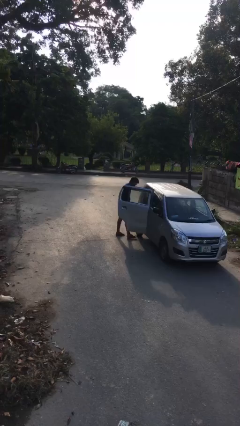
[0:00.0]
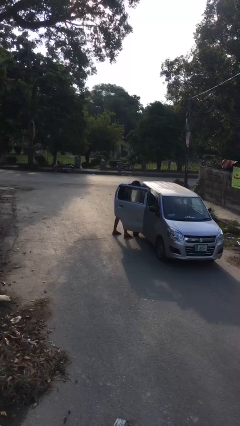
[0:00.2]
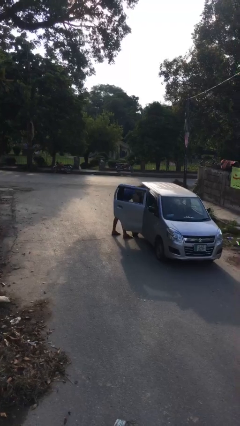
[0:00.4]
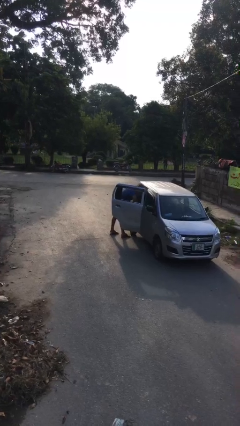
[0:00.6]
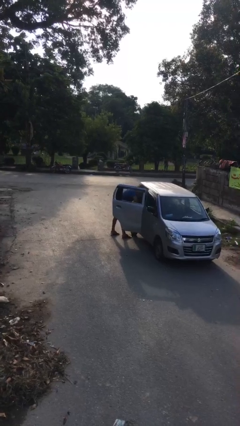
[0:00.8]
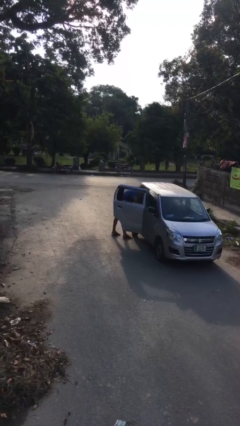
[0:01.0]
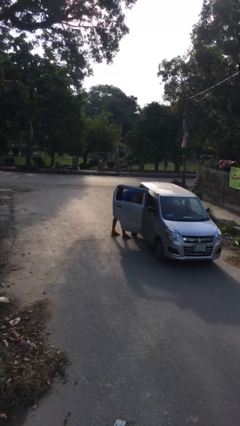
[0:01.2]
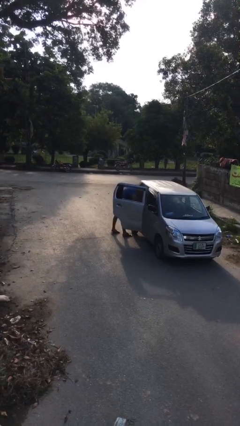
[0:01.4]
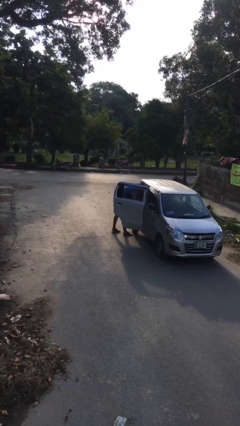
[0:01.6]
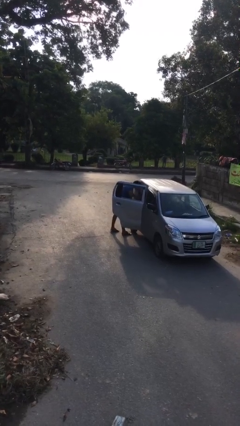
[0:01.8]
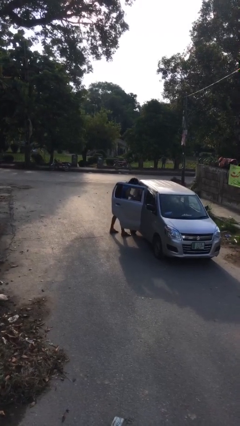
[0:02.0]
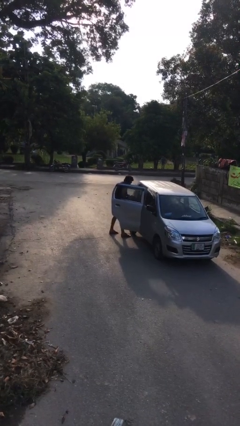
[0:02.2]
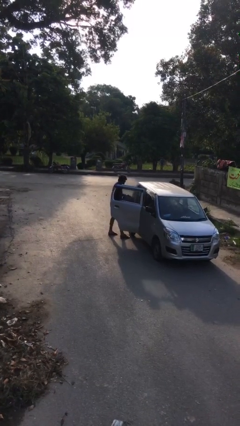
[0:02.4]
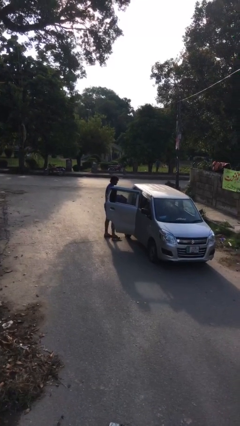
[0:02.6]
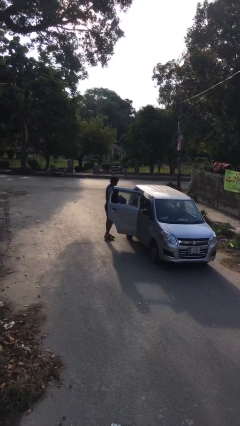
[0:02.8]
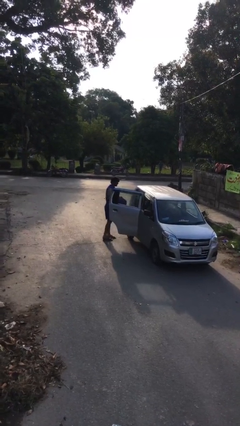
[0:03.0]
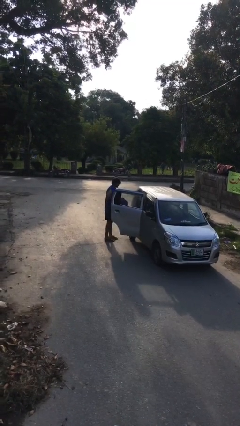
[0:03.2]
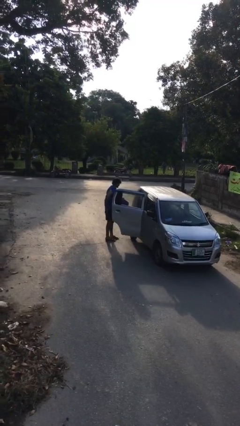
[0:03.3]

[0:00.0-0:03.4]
person unloads car

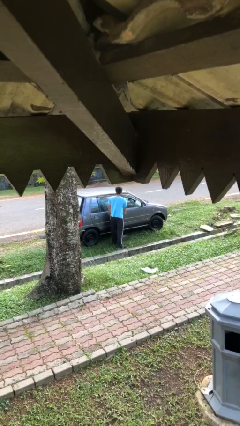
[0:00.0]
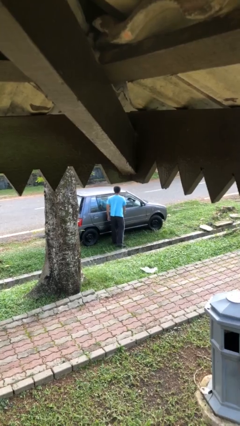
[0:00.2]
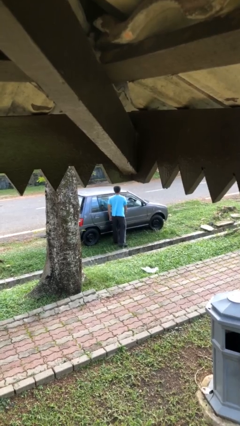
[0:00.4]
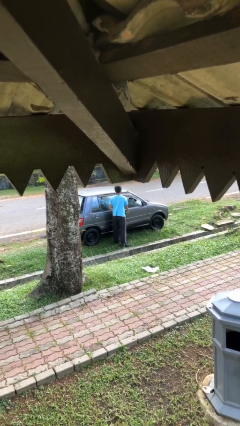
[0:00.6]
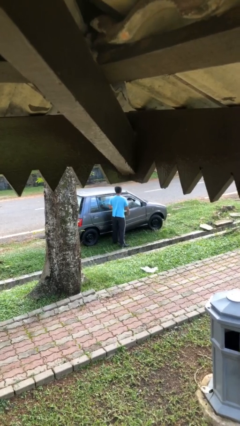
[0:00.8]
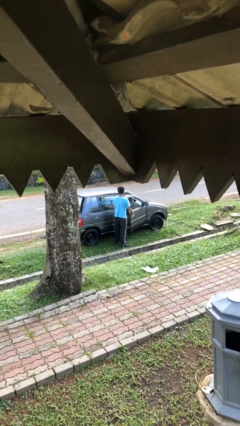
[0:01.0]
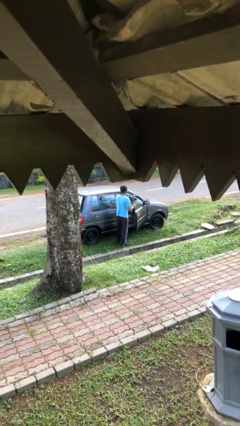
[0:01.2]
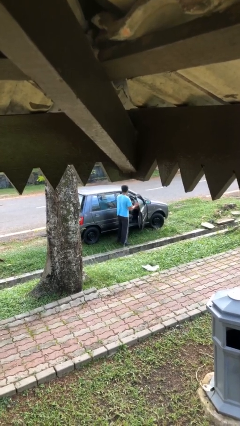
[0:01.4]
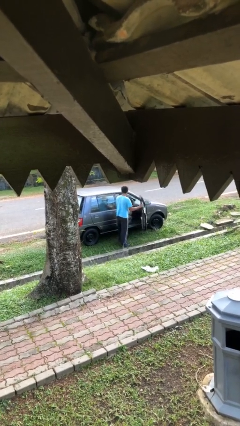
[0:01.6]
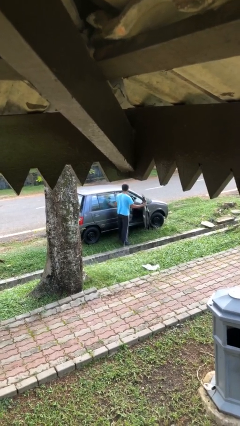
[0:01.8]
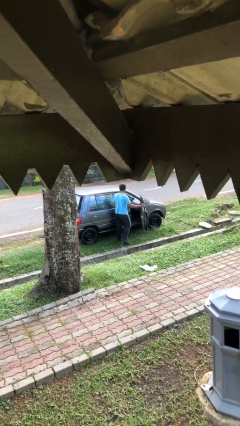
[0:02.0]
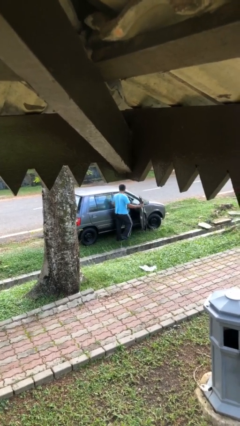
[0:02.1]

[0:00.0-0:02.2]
person opens car door

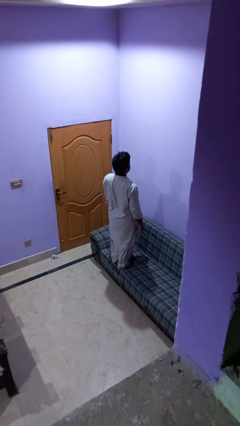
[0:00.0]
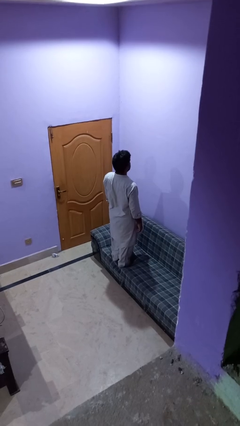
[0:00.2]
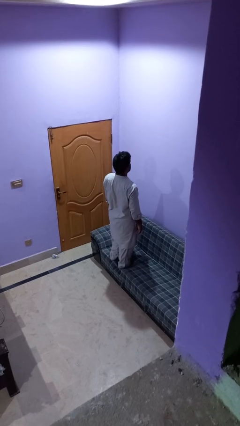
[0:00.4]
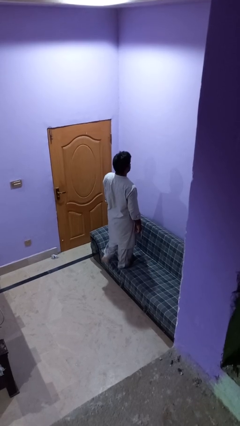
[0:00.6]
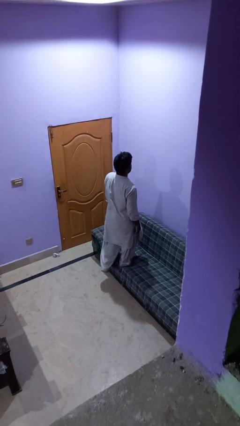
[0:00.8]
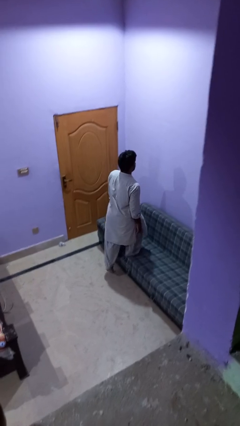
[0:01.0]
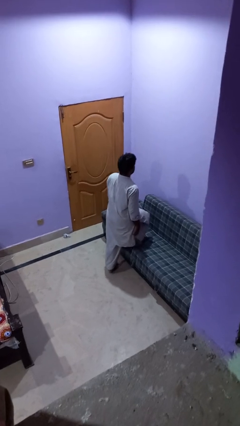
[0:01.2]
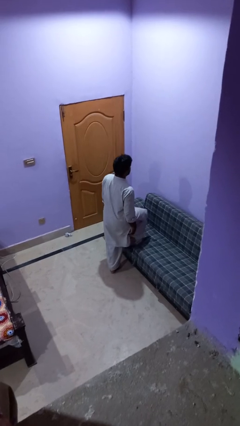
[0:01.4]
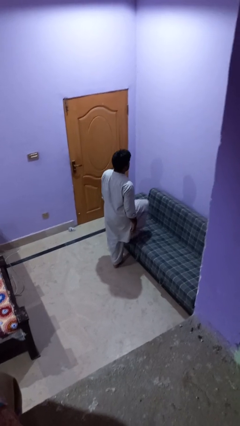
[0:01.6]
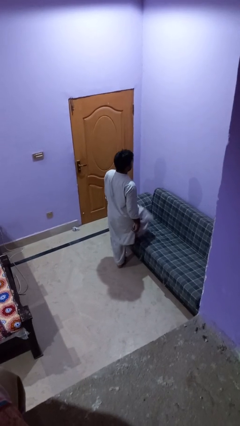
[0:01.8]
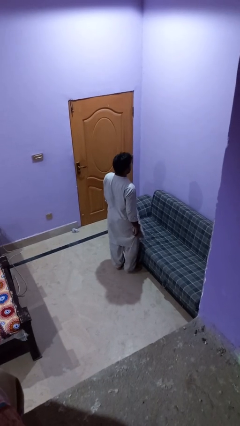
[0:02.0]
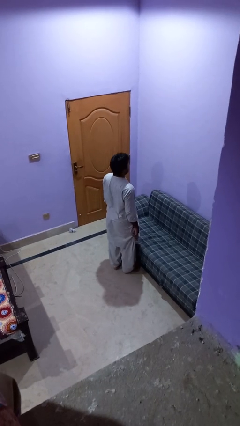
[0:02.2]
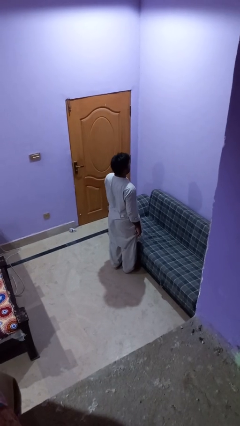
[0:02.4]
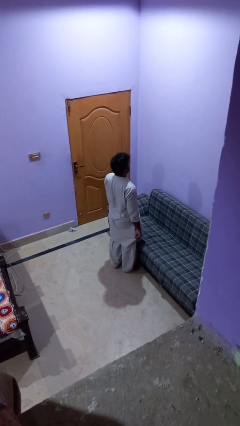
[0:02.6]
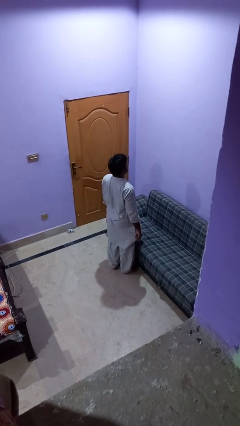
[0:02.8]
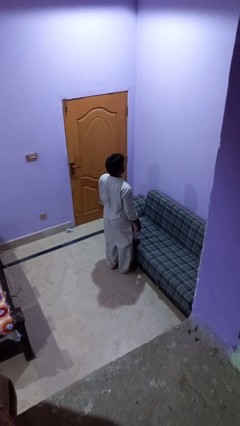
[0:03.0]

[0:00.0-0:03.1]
person climbs off couch

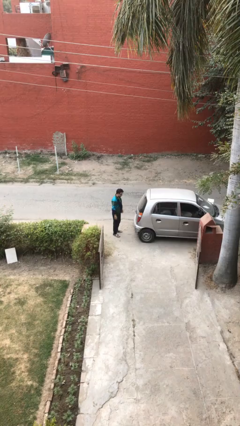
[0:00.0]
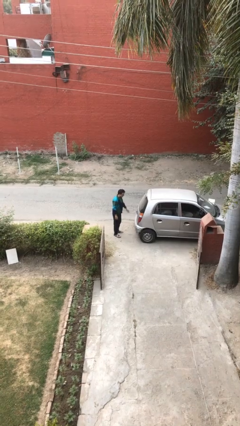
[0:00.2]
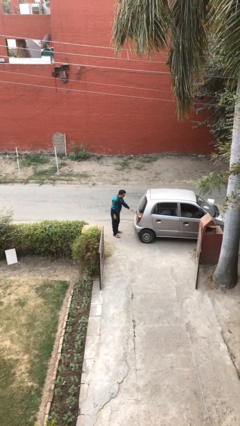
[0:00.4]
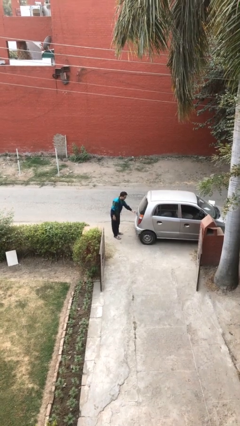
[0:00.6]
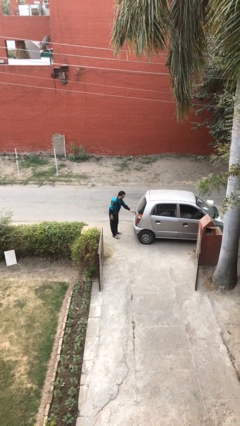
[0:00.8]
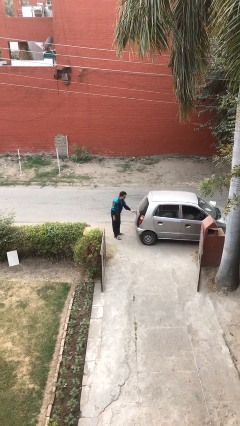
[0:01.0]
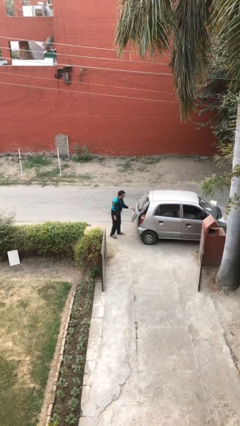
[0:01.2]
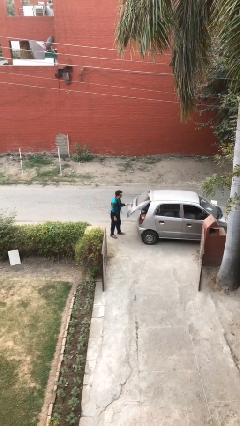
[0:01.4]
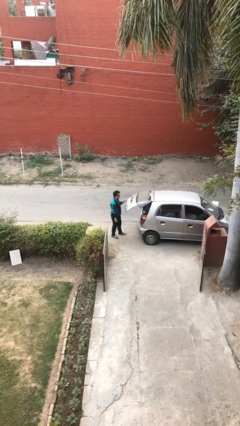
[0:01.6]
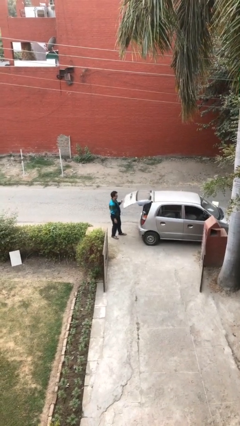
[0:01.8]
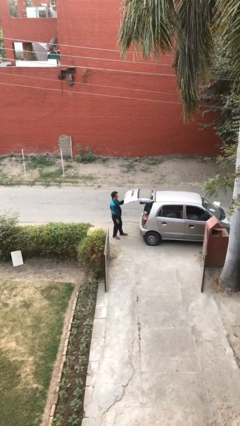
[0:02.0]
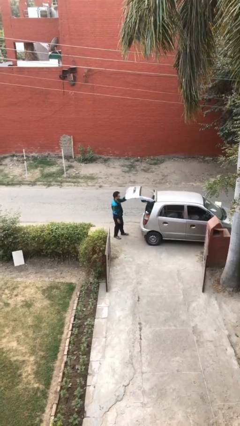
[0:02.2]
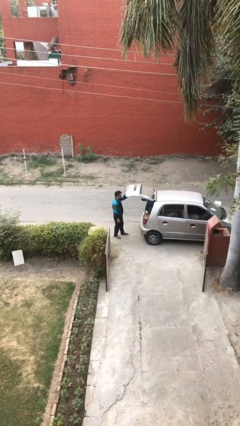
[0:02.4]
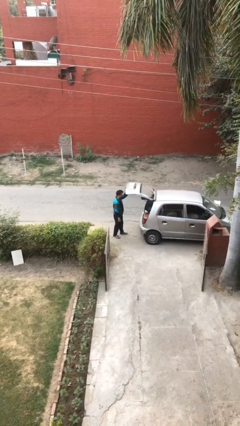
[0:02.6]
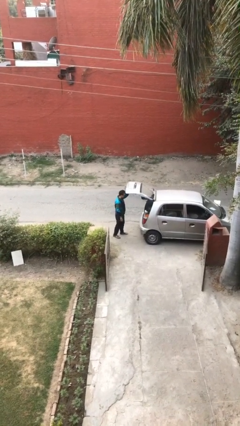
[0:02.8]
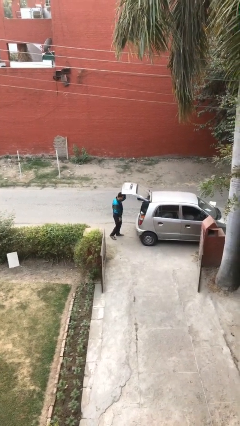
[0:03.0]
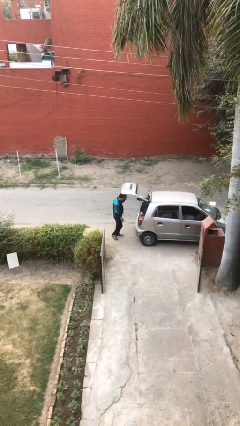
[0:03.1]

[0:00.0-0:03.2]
person opens car trunk

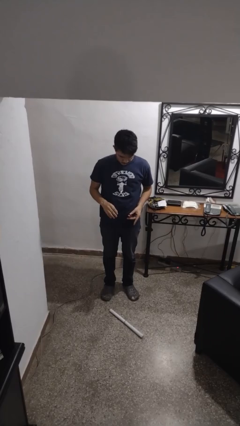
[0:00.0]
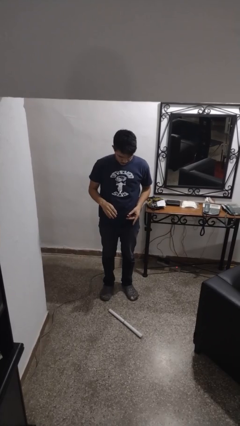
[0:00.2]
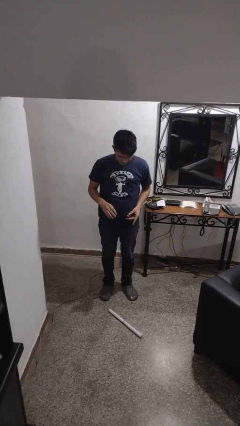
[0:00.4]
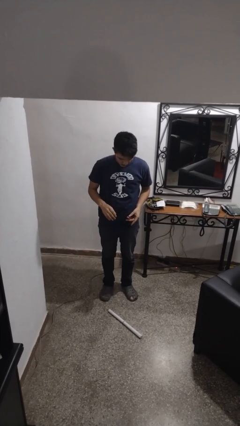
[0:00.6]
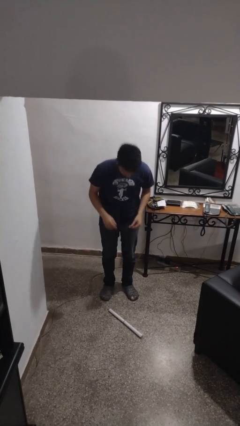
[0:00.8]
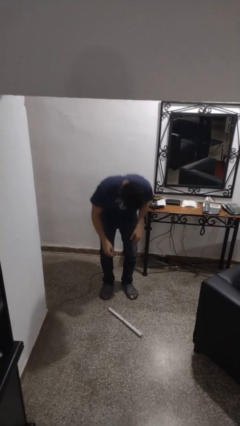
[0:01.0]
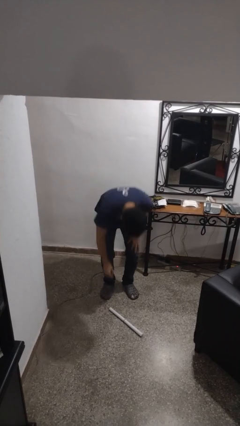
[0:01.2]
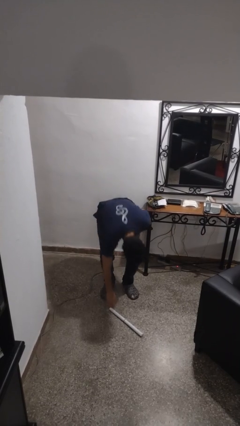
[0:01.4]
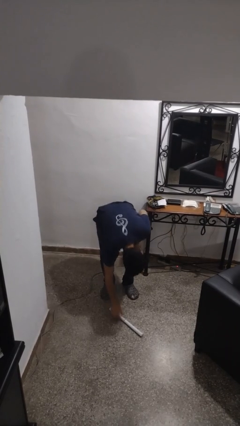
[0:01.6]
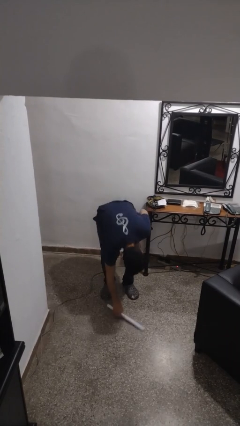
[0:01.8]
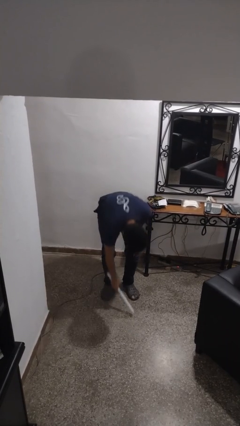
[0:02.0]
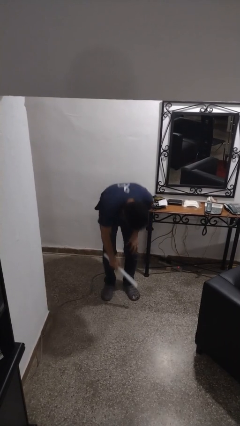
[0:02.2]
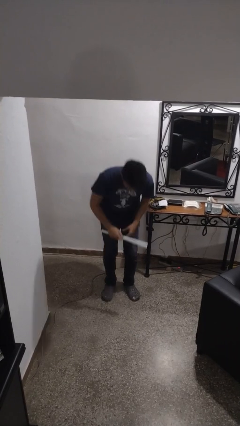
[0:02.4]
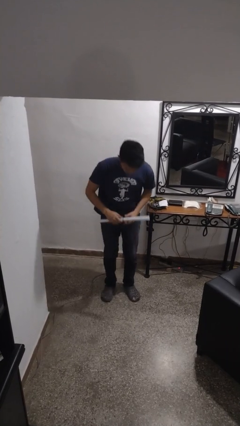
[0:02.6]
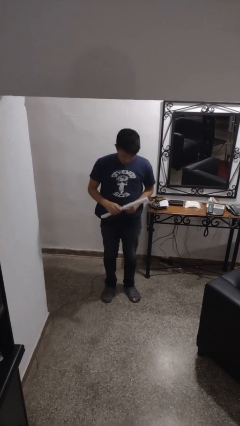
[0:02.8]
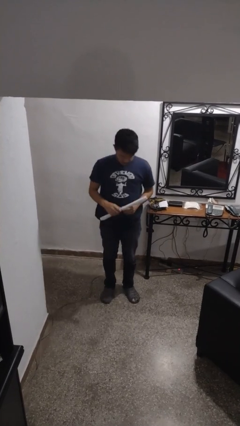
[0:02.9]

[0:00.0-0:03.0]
person picks up object from floor

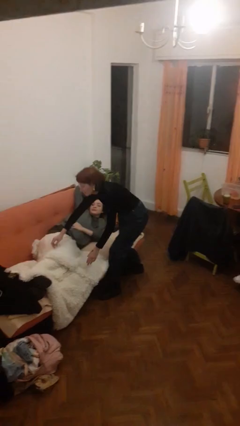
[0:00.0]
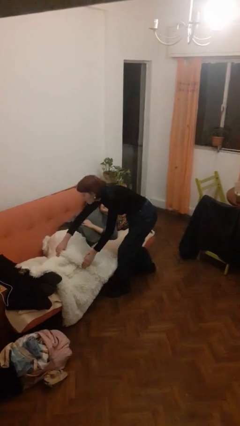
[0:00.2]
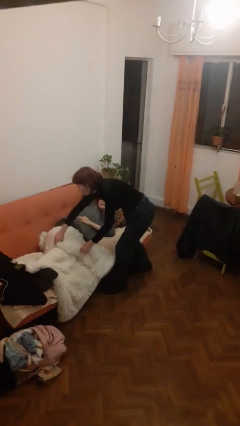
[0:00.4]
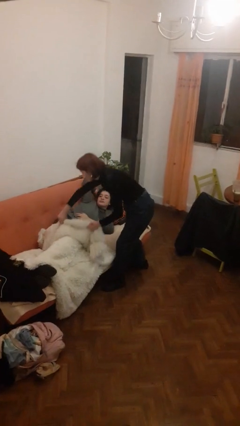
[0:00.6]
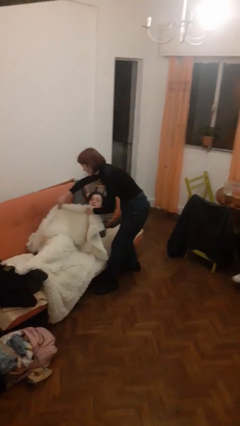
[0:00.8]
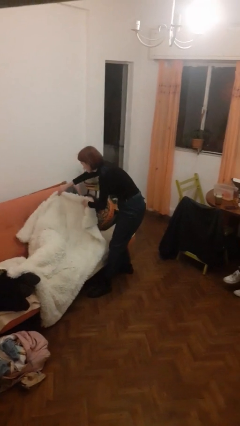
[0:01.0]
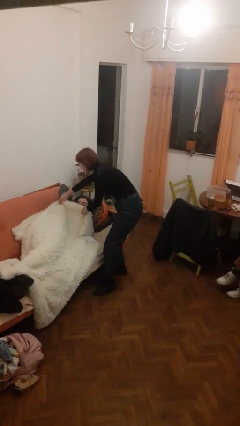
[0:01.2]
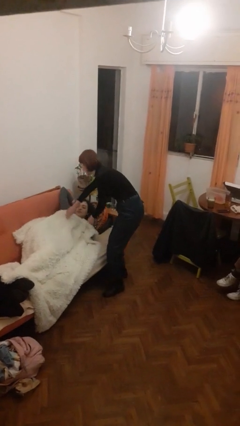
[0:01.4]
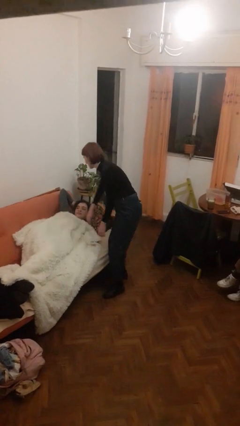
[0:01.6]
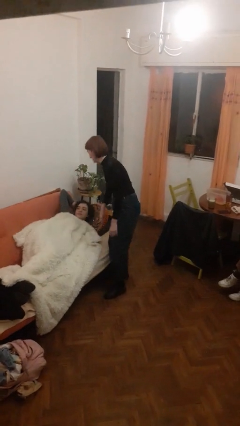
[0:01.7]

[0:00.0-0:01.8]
person covers friend with blanket

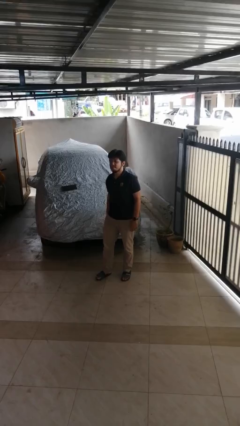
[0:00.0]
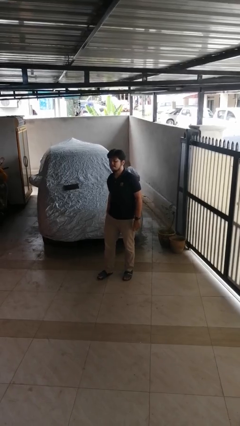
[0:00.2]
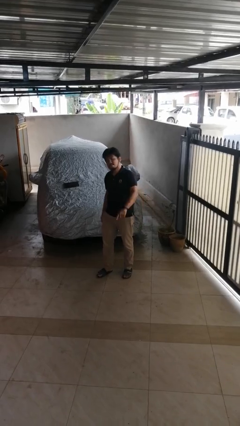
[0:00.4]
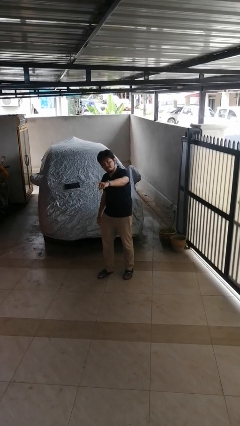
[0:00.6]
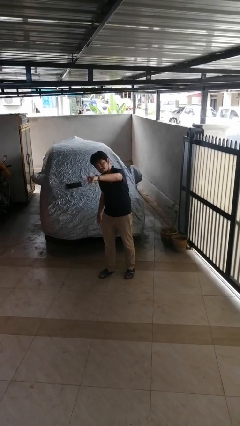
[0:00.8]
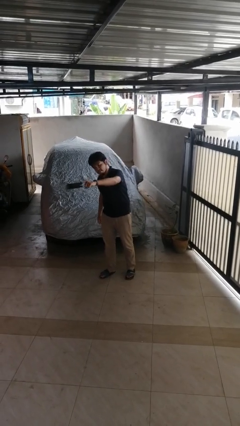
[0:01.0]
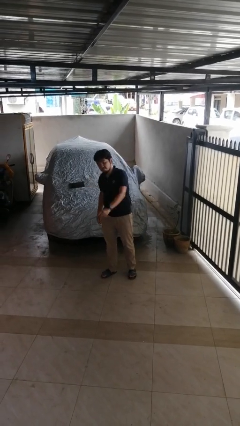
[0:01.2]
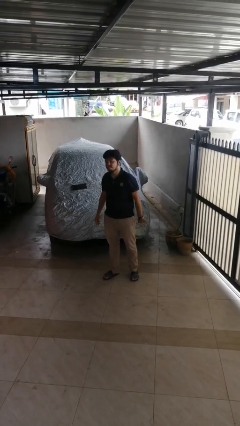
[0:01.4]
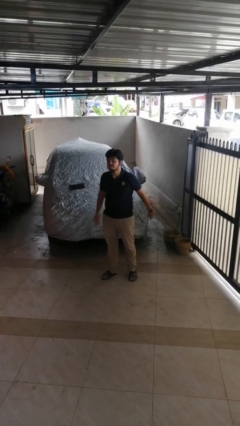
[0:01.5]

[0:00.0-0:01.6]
person points at person
